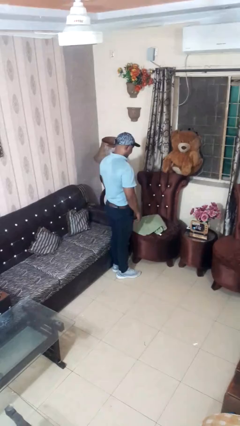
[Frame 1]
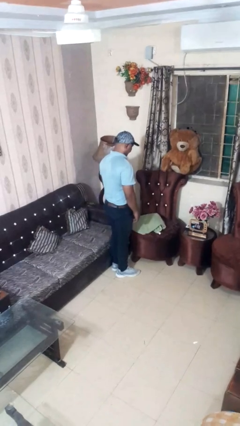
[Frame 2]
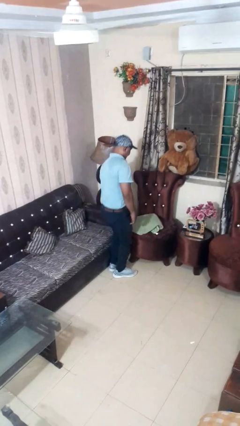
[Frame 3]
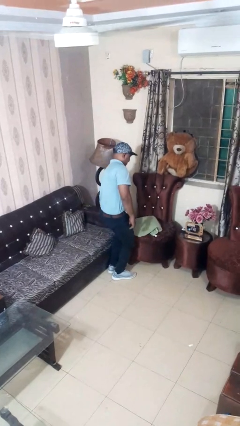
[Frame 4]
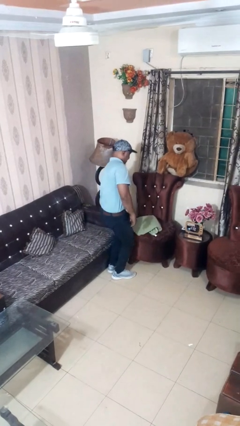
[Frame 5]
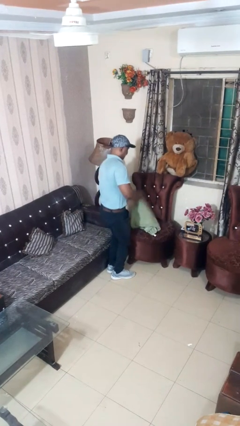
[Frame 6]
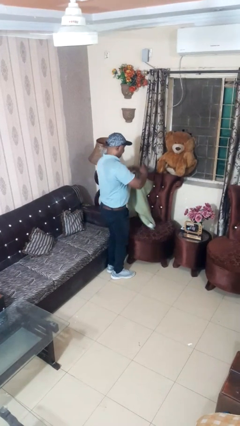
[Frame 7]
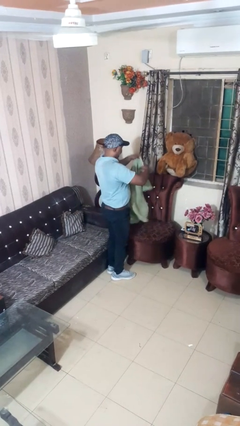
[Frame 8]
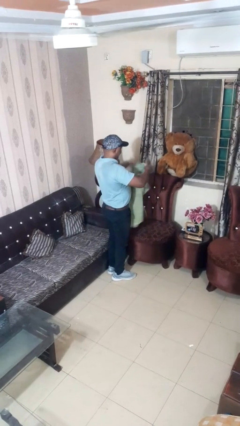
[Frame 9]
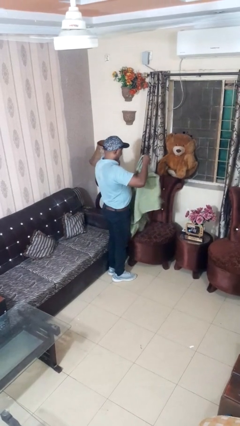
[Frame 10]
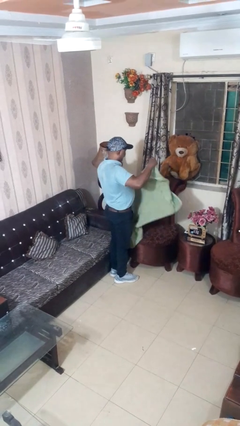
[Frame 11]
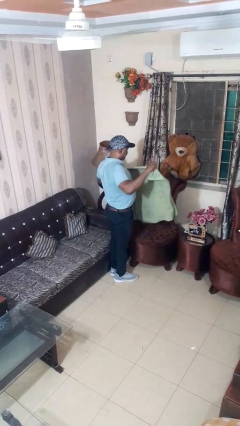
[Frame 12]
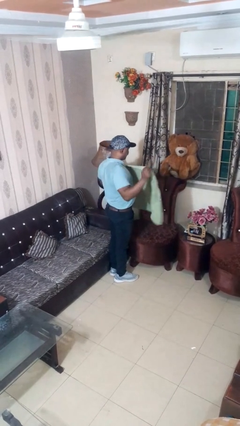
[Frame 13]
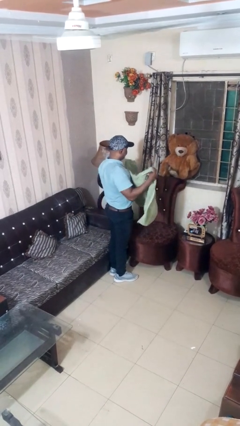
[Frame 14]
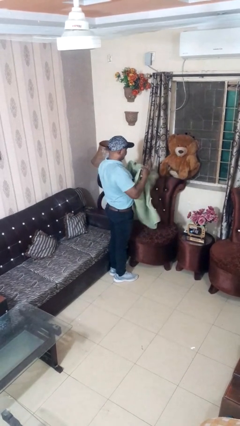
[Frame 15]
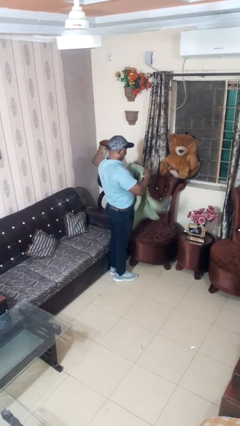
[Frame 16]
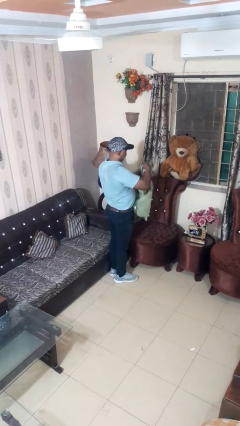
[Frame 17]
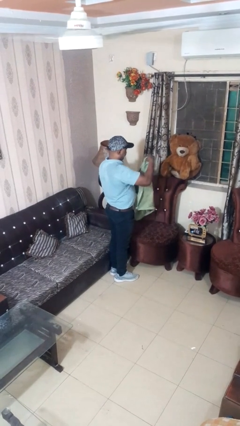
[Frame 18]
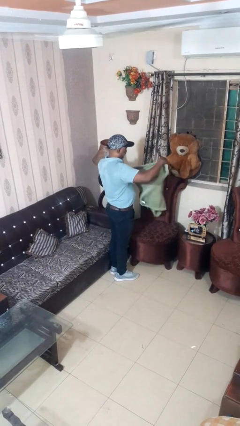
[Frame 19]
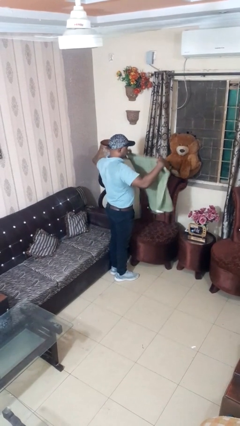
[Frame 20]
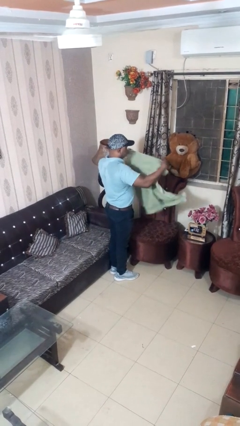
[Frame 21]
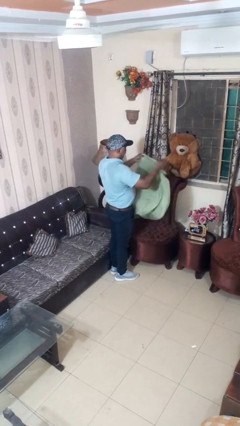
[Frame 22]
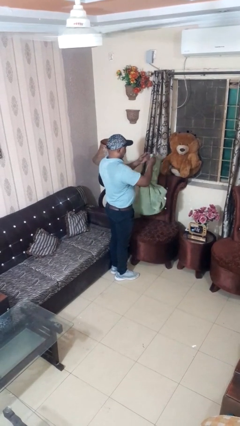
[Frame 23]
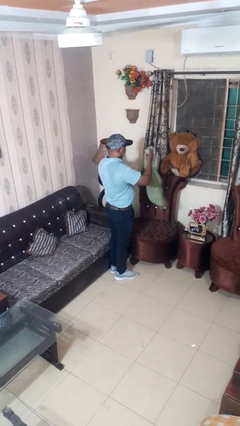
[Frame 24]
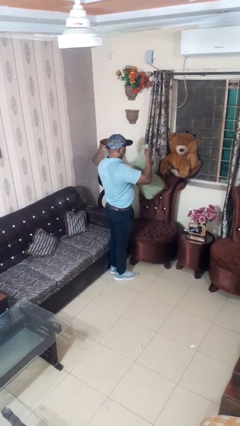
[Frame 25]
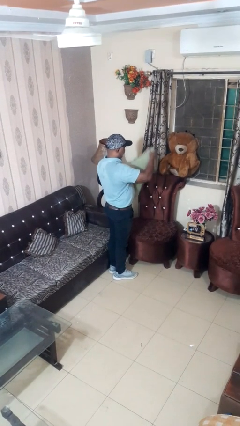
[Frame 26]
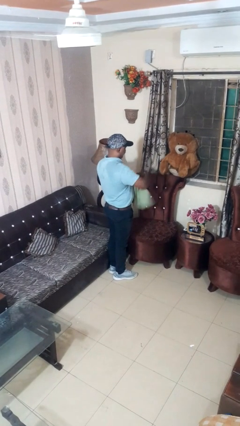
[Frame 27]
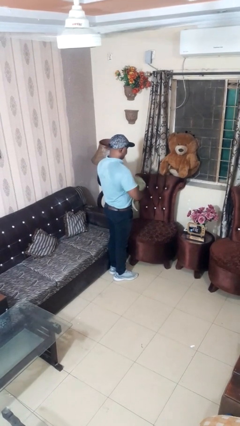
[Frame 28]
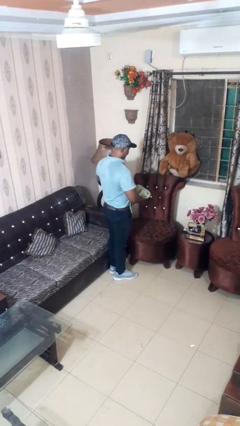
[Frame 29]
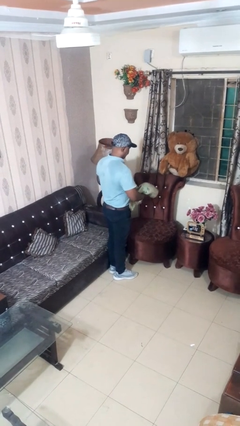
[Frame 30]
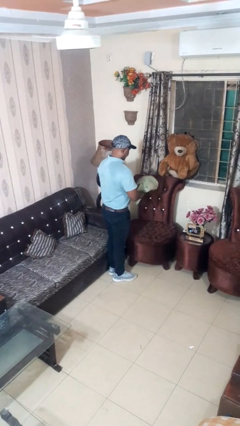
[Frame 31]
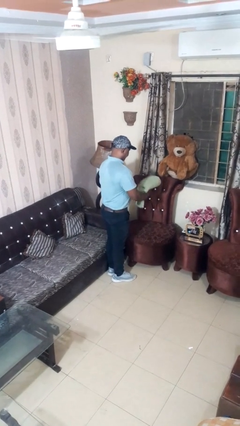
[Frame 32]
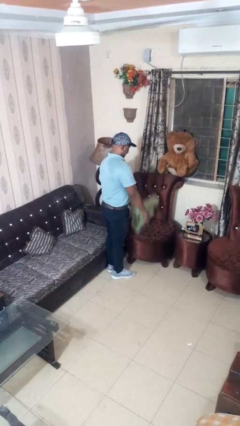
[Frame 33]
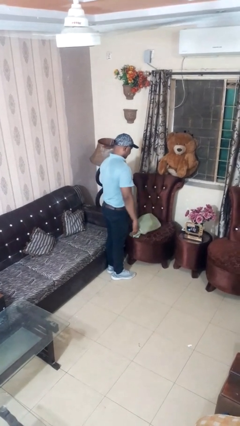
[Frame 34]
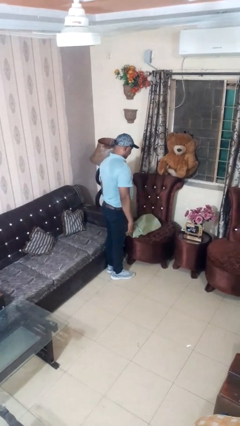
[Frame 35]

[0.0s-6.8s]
person folds towel

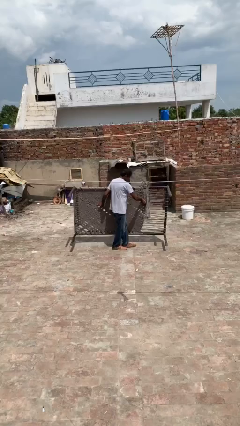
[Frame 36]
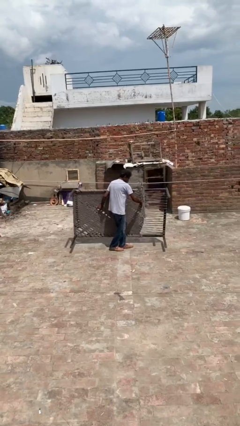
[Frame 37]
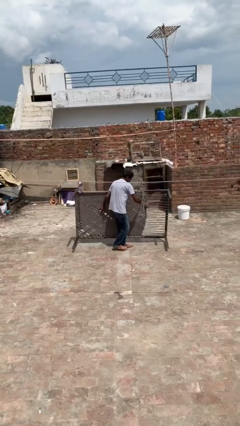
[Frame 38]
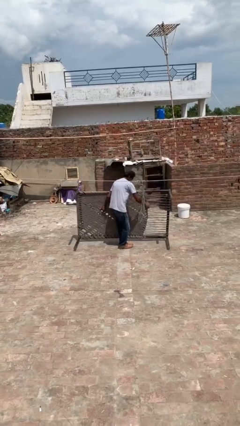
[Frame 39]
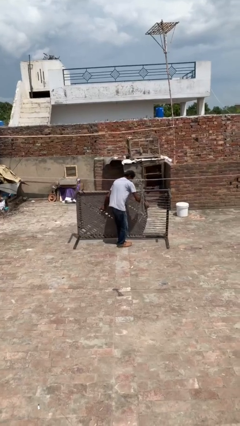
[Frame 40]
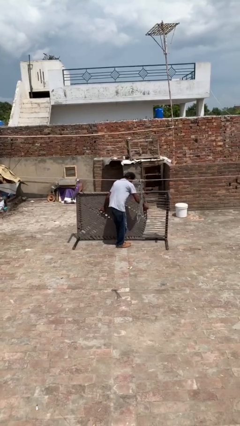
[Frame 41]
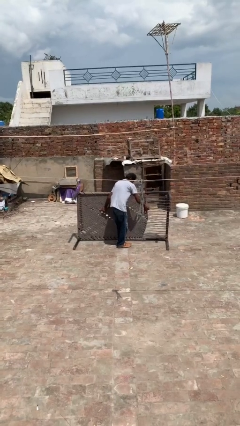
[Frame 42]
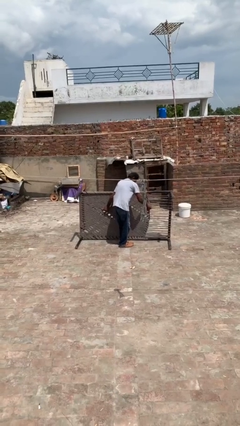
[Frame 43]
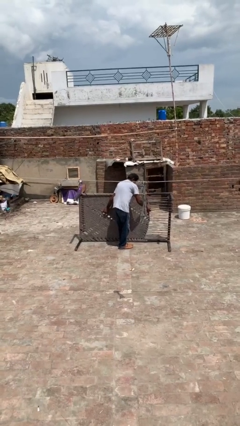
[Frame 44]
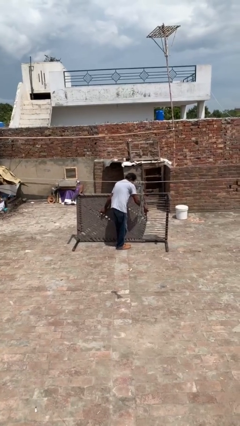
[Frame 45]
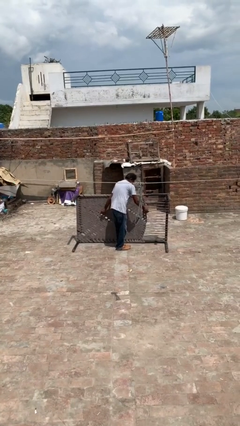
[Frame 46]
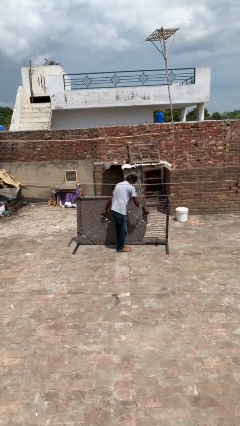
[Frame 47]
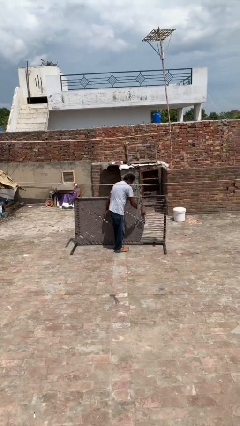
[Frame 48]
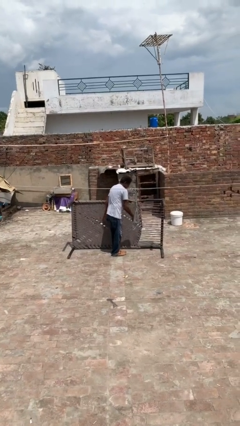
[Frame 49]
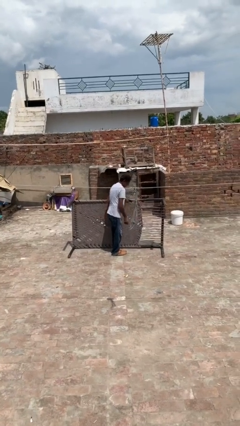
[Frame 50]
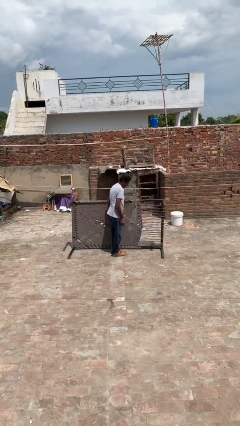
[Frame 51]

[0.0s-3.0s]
person puts down object on floor

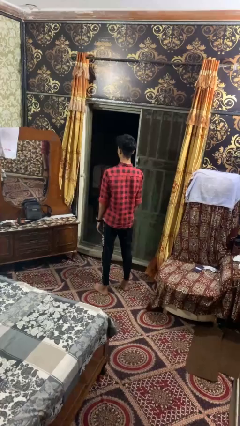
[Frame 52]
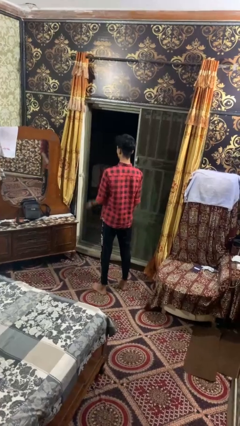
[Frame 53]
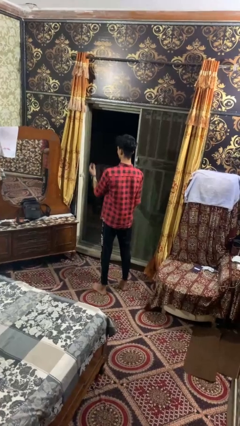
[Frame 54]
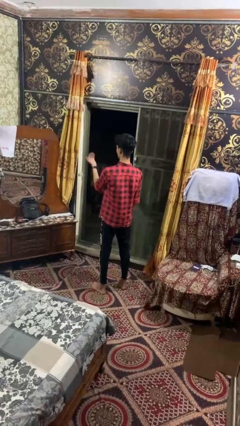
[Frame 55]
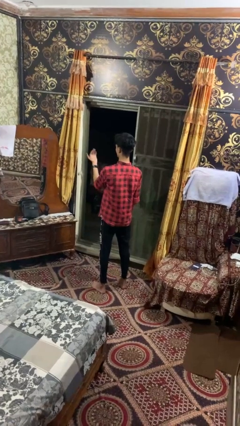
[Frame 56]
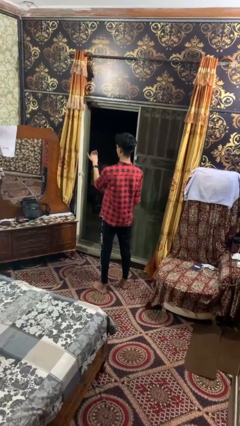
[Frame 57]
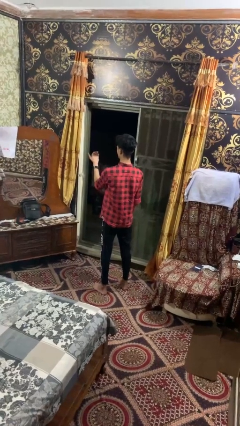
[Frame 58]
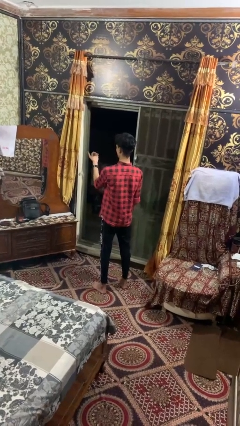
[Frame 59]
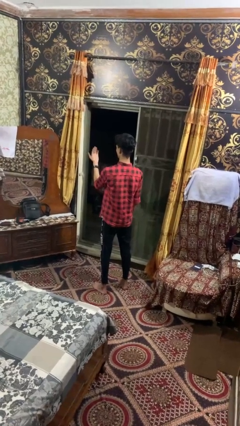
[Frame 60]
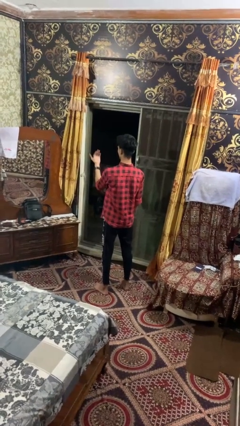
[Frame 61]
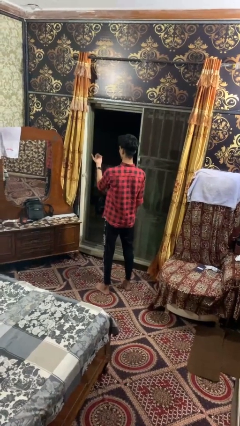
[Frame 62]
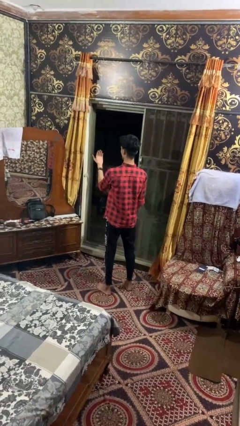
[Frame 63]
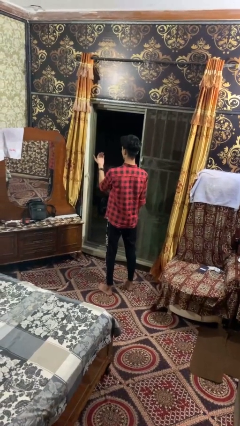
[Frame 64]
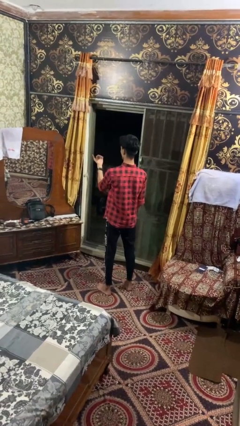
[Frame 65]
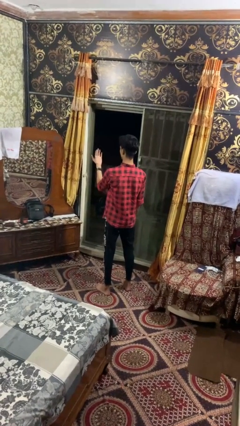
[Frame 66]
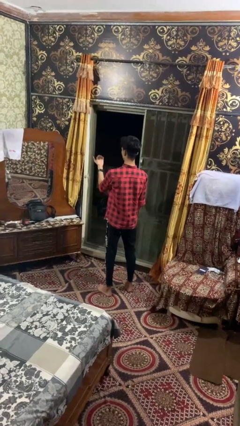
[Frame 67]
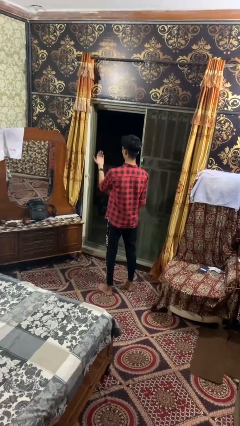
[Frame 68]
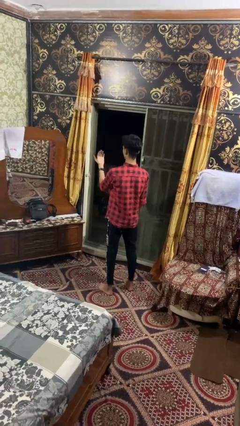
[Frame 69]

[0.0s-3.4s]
person gestures come here

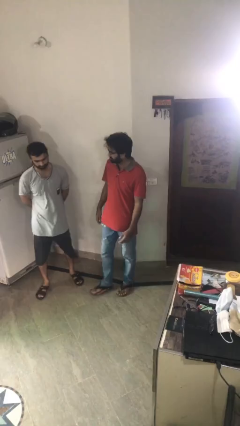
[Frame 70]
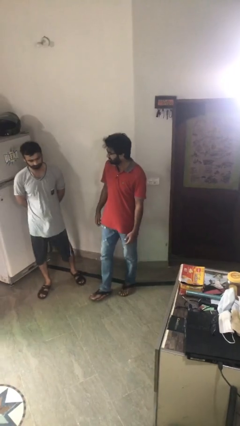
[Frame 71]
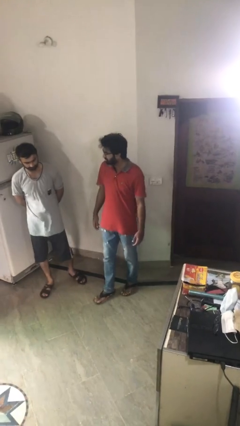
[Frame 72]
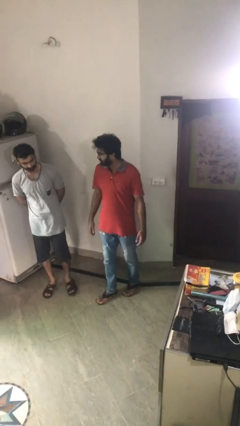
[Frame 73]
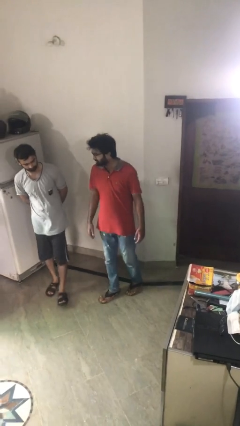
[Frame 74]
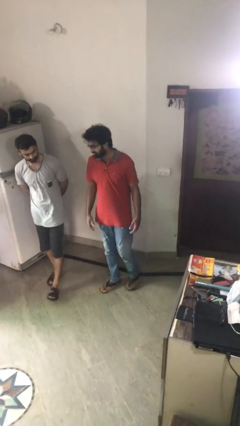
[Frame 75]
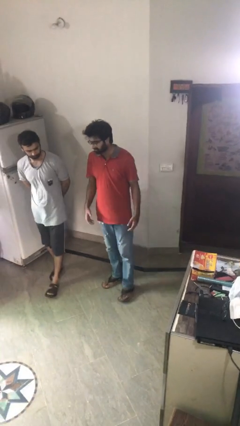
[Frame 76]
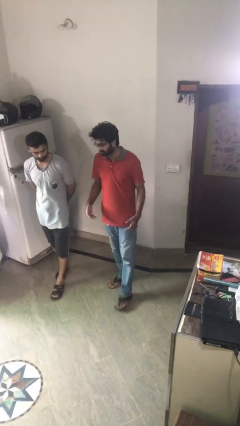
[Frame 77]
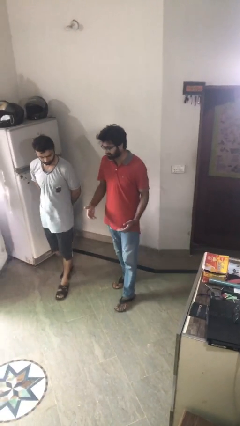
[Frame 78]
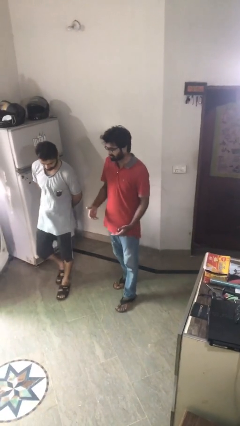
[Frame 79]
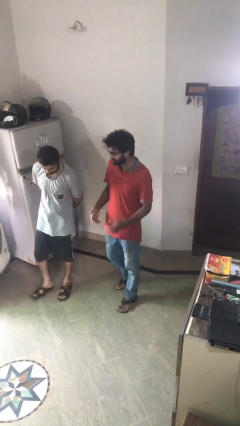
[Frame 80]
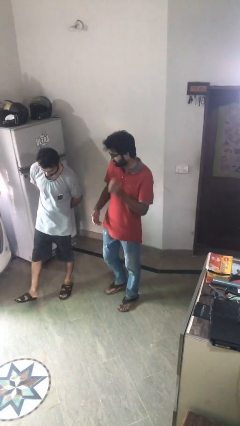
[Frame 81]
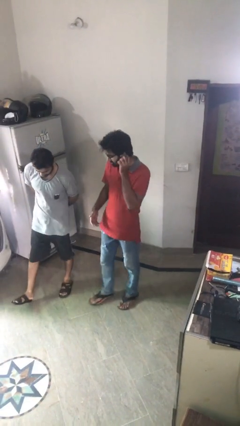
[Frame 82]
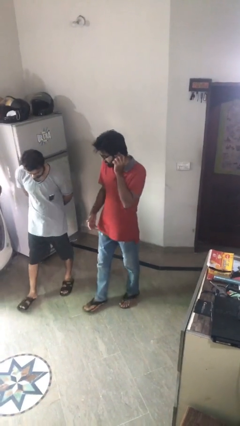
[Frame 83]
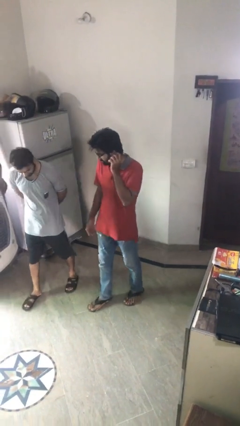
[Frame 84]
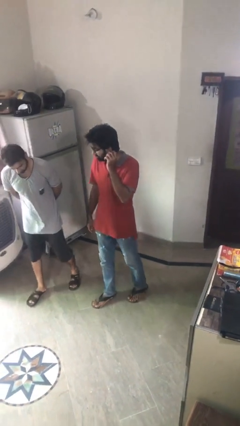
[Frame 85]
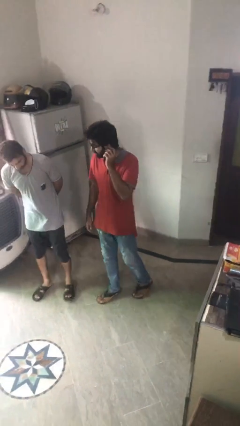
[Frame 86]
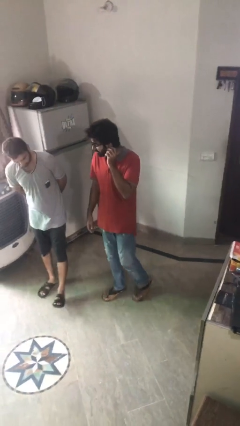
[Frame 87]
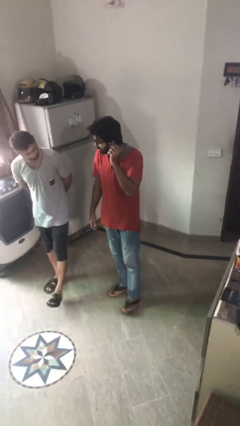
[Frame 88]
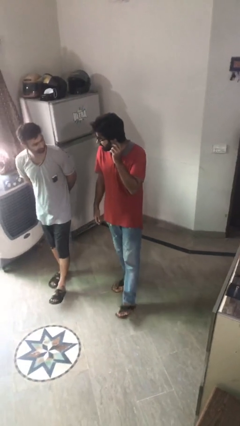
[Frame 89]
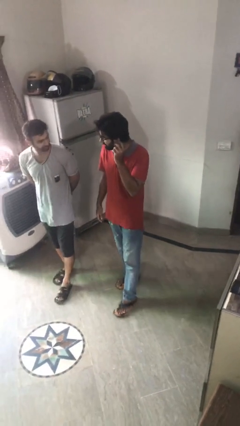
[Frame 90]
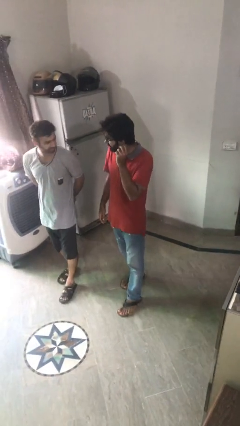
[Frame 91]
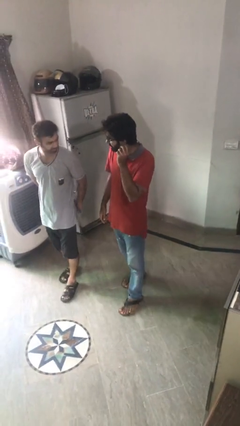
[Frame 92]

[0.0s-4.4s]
person talks to person

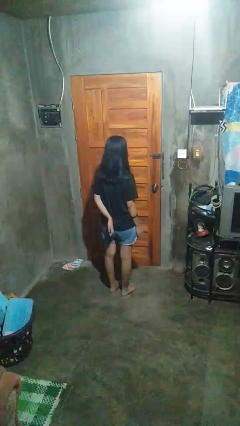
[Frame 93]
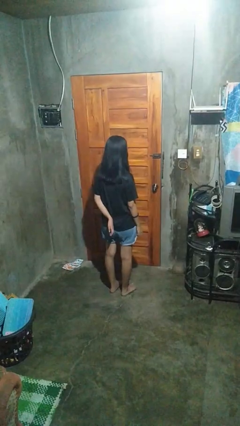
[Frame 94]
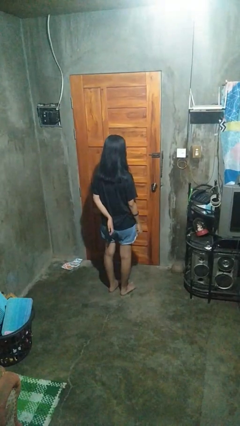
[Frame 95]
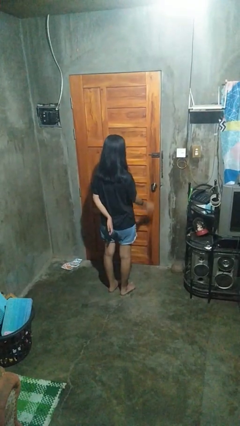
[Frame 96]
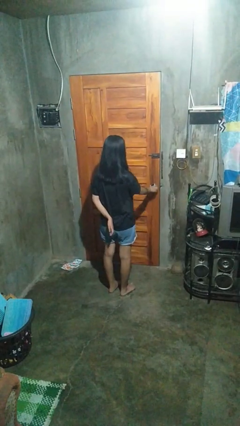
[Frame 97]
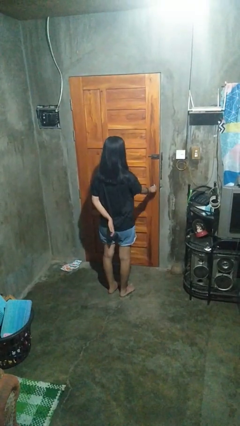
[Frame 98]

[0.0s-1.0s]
person opens facility door
